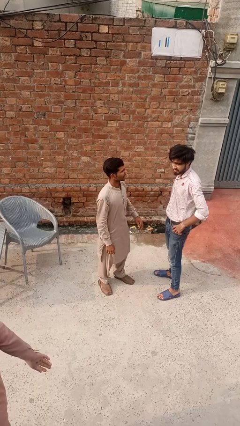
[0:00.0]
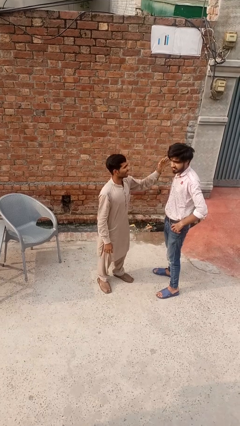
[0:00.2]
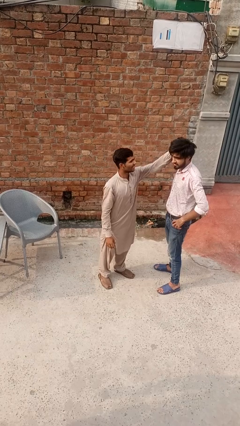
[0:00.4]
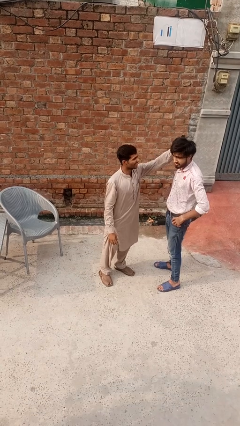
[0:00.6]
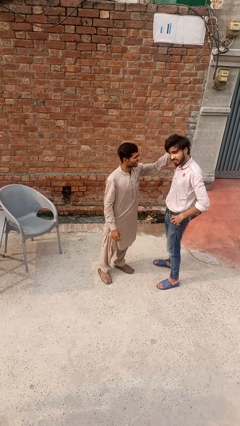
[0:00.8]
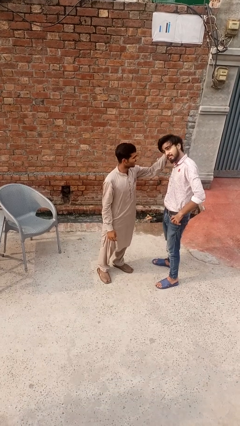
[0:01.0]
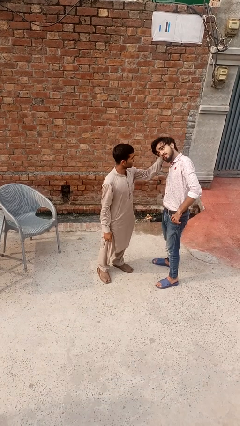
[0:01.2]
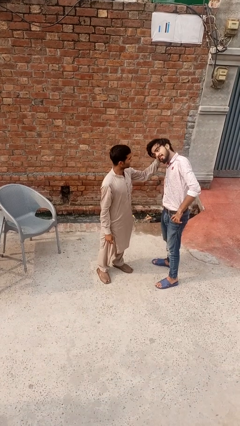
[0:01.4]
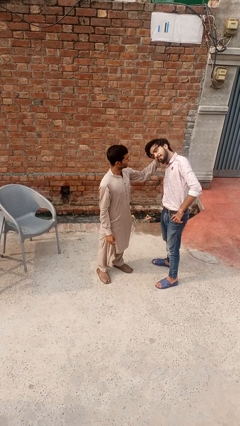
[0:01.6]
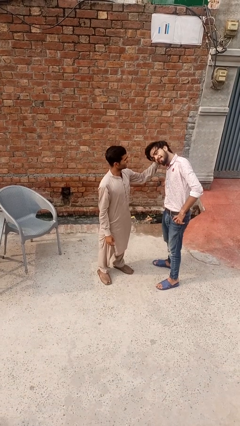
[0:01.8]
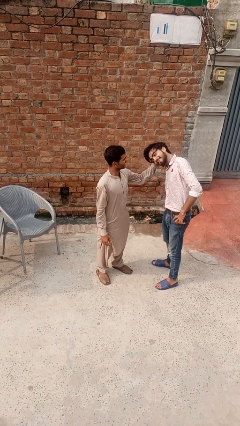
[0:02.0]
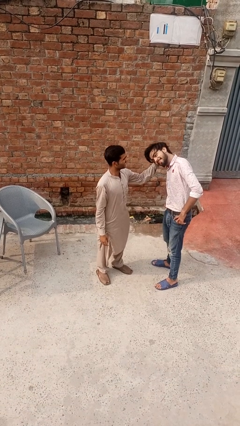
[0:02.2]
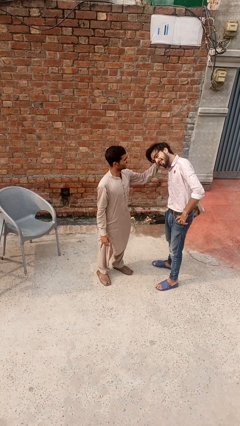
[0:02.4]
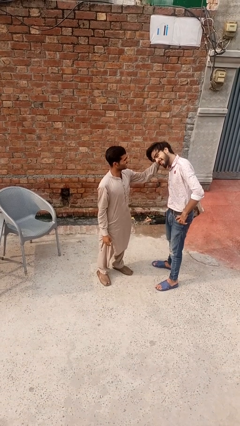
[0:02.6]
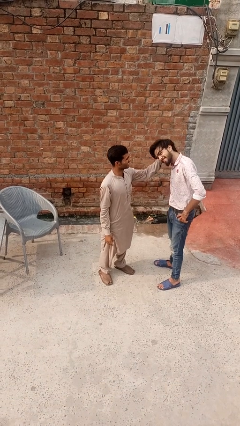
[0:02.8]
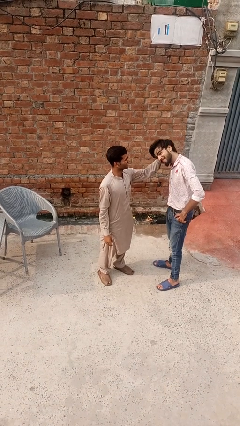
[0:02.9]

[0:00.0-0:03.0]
person grabs person by hair

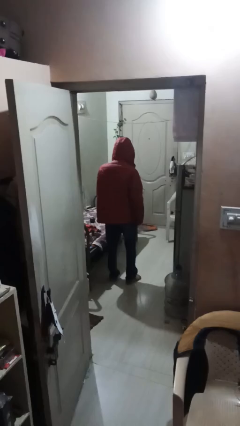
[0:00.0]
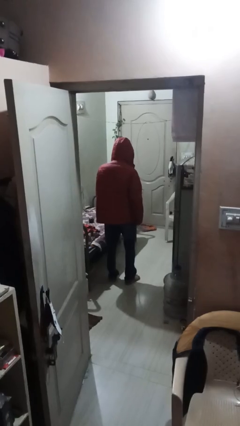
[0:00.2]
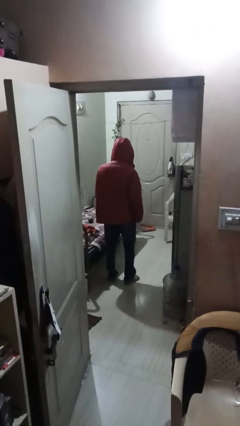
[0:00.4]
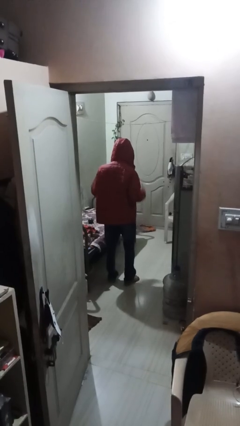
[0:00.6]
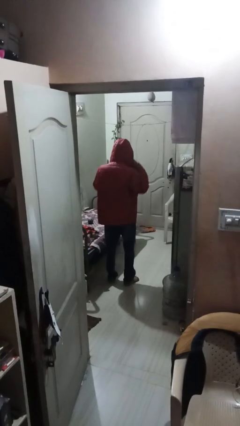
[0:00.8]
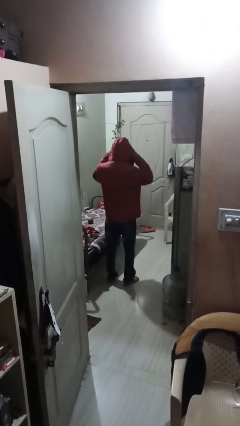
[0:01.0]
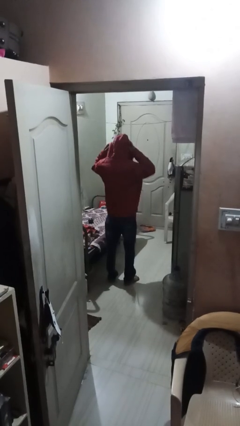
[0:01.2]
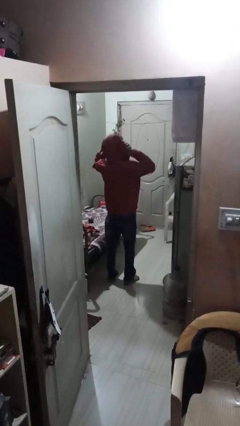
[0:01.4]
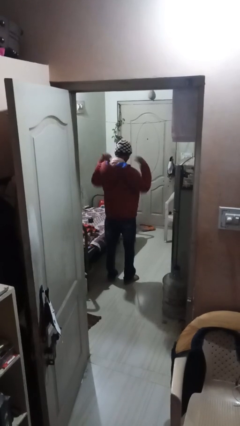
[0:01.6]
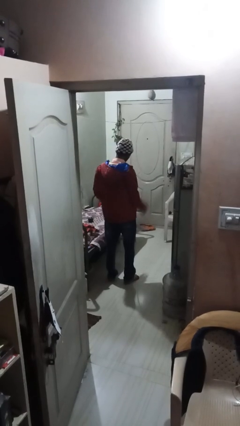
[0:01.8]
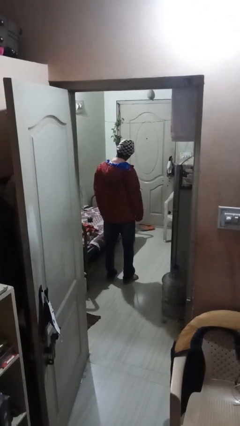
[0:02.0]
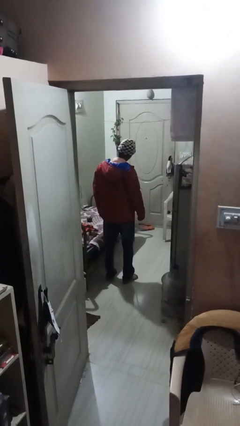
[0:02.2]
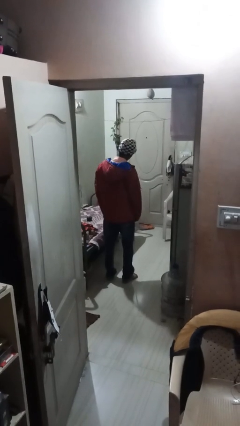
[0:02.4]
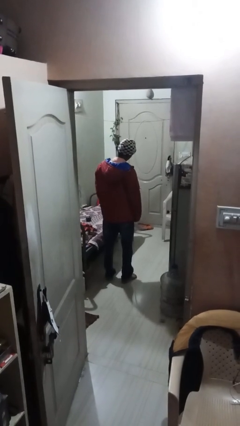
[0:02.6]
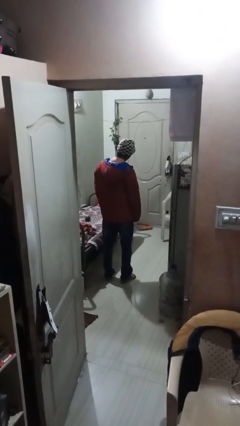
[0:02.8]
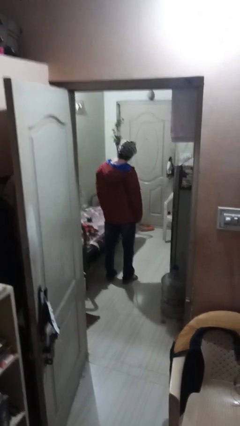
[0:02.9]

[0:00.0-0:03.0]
person takes off hoodie

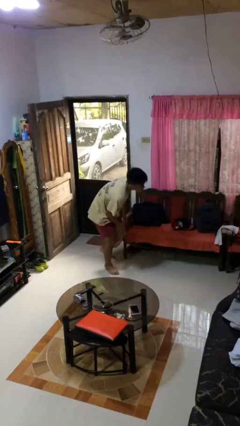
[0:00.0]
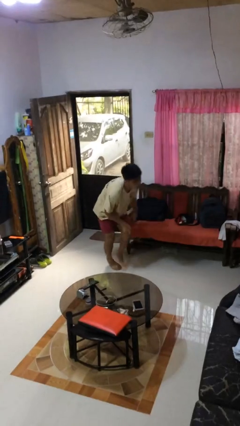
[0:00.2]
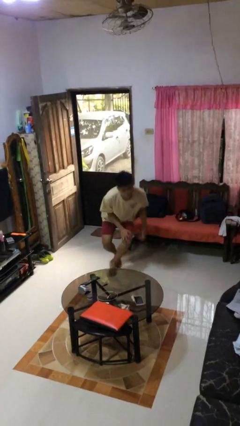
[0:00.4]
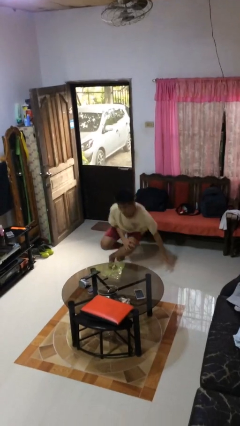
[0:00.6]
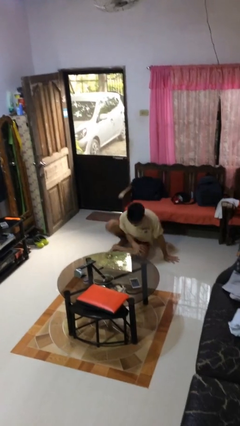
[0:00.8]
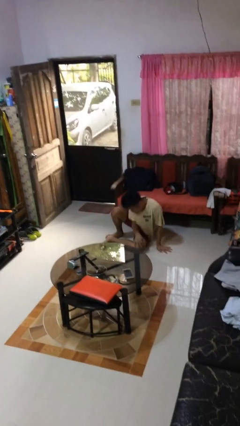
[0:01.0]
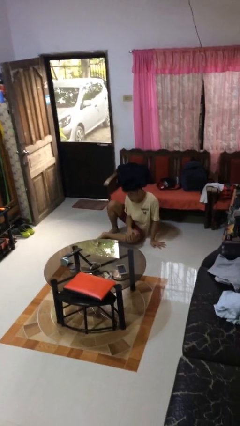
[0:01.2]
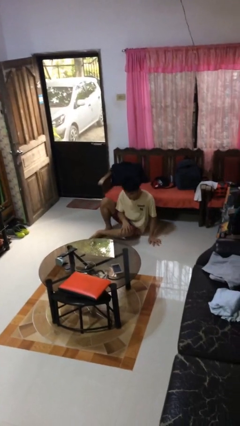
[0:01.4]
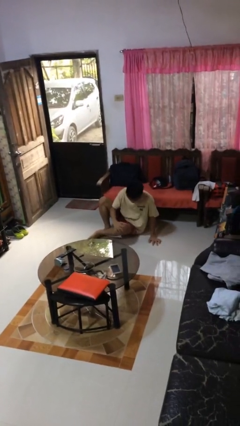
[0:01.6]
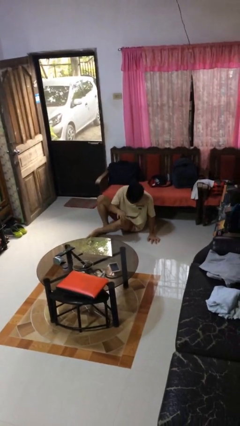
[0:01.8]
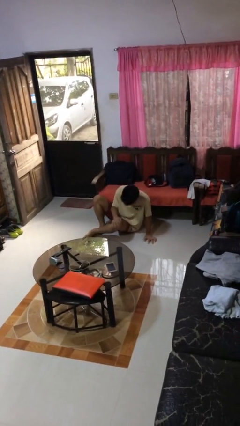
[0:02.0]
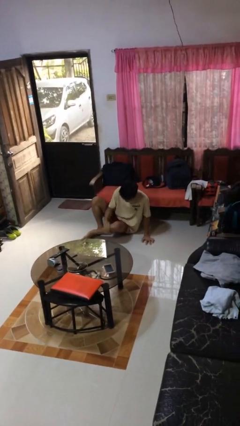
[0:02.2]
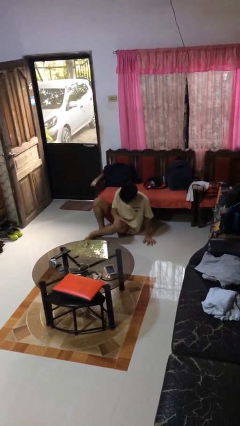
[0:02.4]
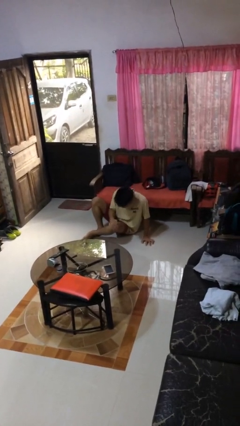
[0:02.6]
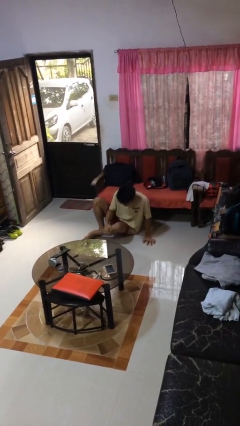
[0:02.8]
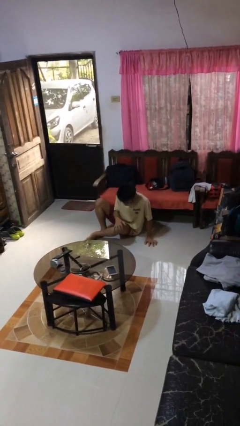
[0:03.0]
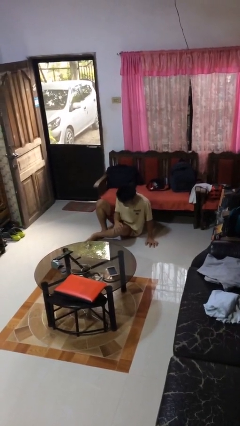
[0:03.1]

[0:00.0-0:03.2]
person lies down on floor

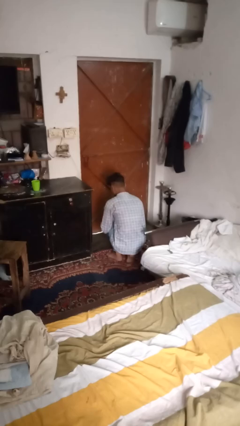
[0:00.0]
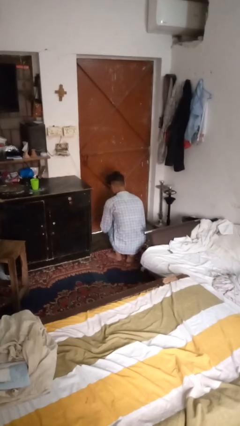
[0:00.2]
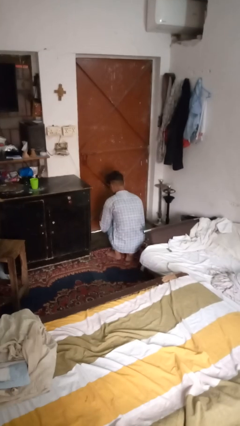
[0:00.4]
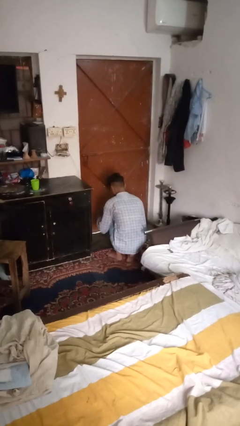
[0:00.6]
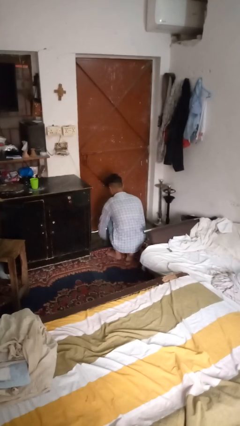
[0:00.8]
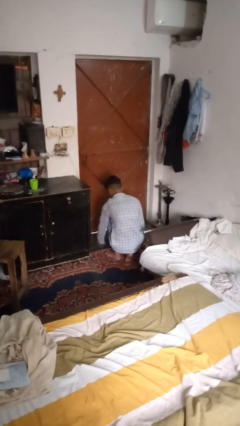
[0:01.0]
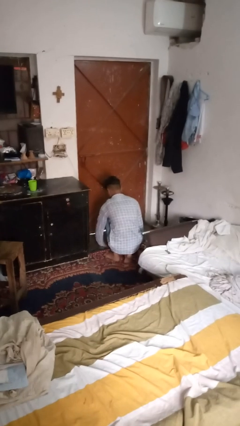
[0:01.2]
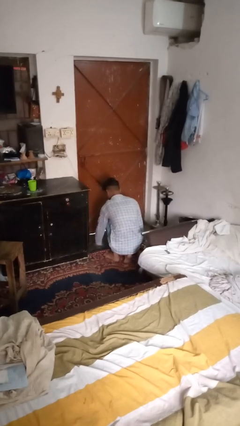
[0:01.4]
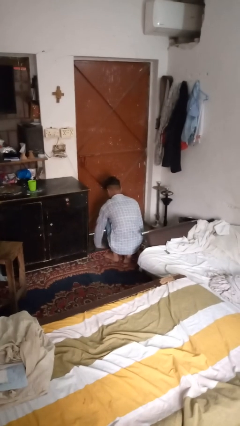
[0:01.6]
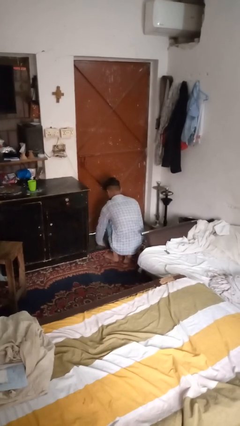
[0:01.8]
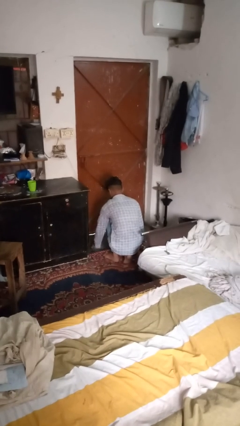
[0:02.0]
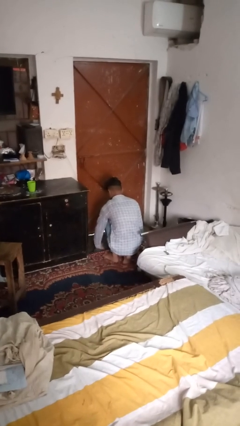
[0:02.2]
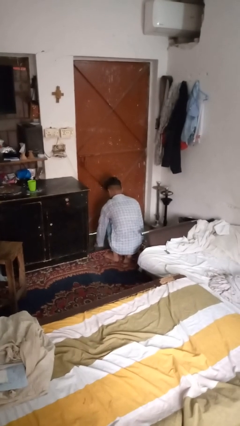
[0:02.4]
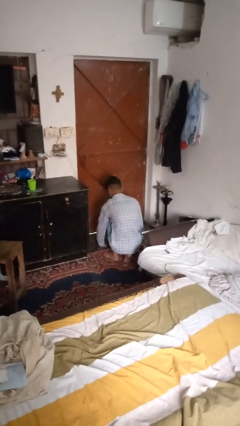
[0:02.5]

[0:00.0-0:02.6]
person mops

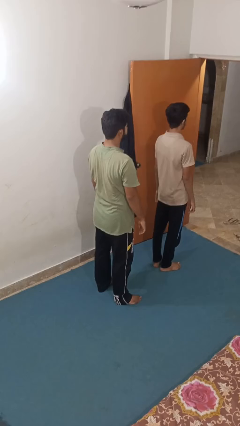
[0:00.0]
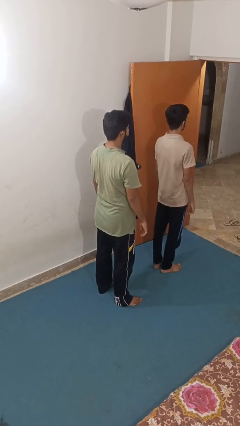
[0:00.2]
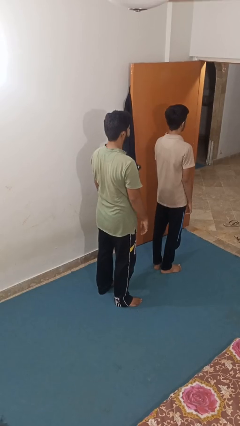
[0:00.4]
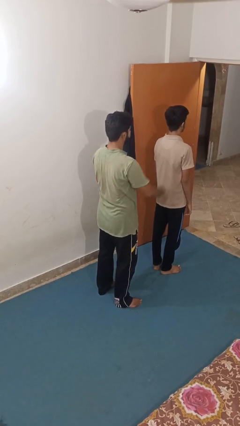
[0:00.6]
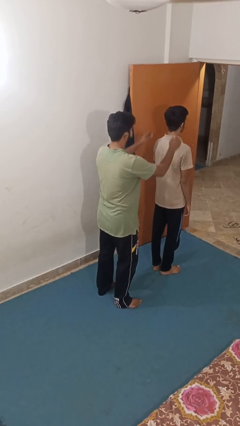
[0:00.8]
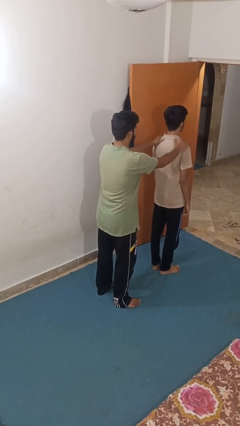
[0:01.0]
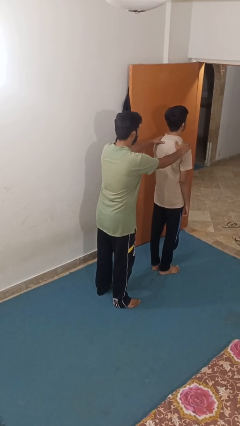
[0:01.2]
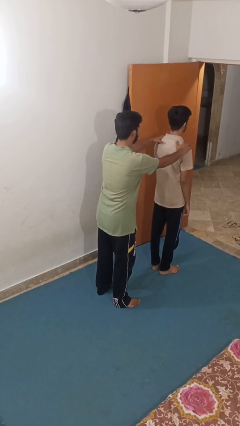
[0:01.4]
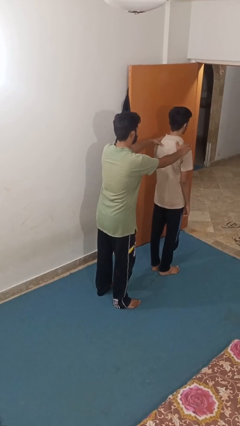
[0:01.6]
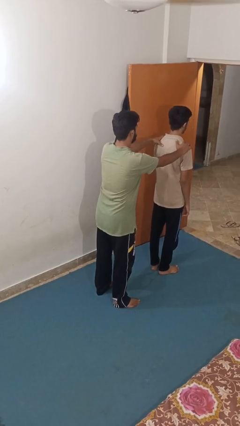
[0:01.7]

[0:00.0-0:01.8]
person grabs person by shoulder

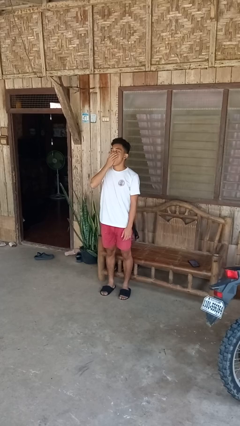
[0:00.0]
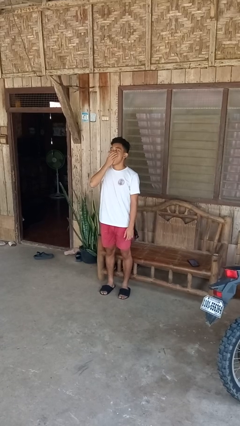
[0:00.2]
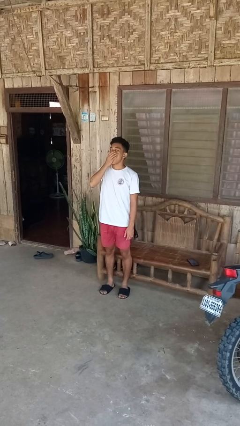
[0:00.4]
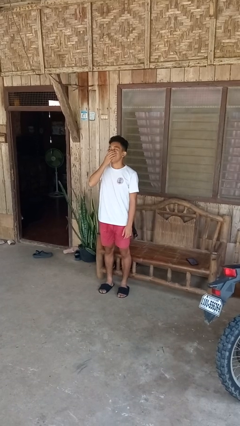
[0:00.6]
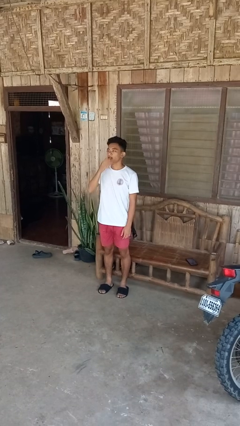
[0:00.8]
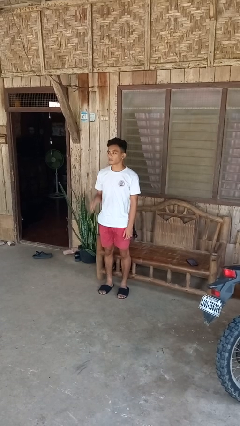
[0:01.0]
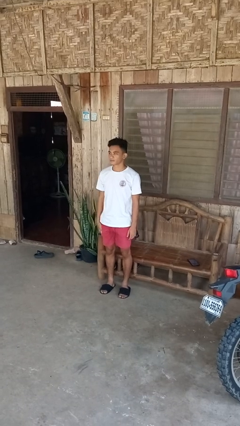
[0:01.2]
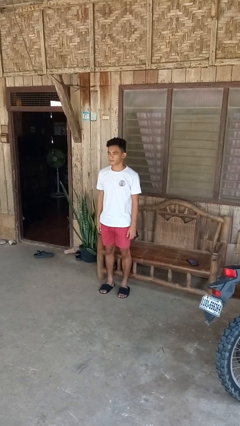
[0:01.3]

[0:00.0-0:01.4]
person yawns

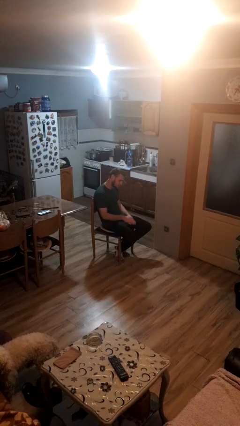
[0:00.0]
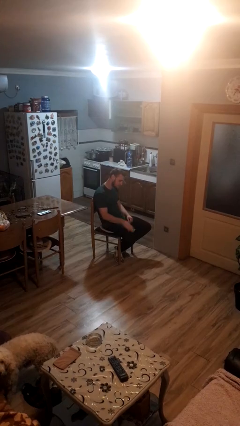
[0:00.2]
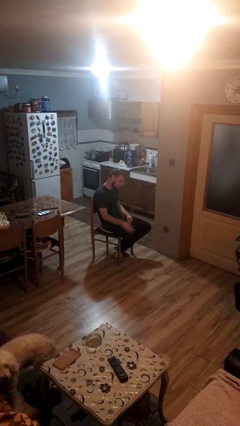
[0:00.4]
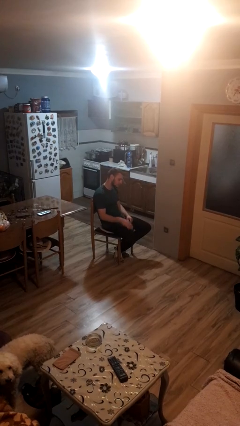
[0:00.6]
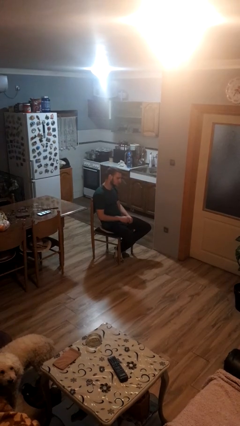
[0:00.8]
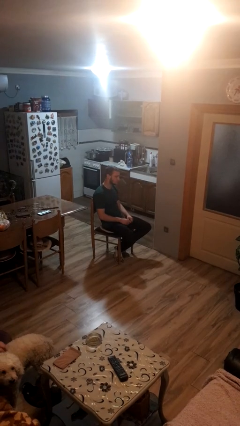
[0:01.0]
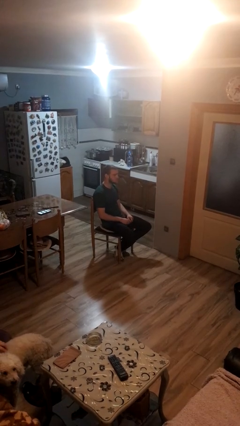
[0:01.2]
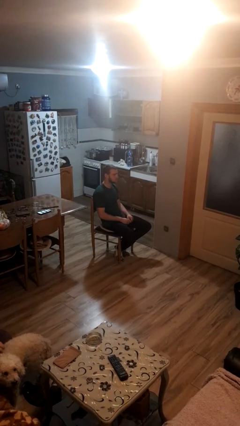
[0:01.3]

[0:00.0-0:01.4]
person slaps hands on thighs

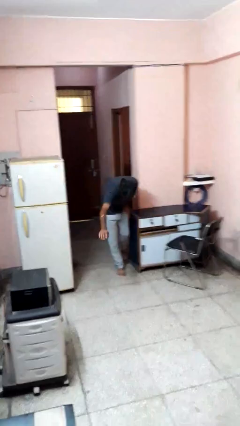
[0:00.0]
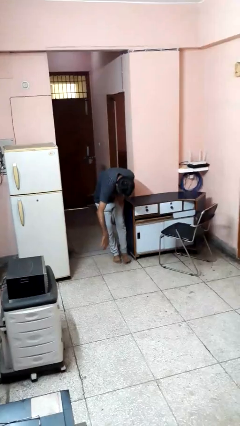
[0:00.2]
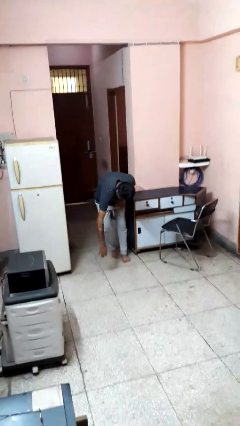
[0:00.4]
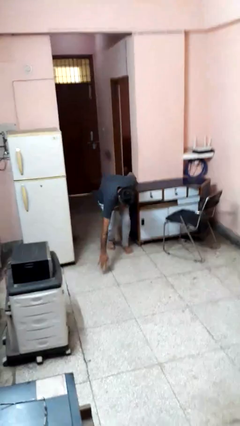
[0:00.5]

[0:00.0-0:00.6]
person trips on object on floor
